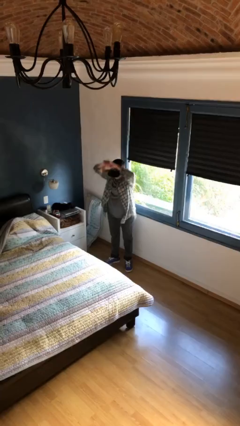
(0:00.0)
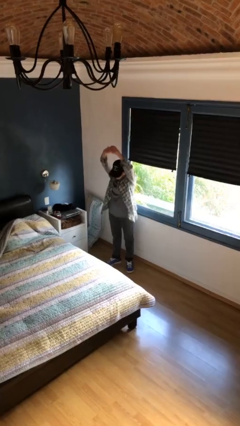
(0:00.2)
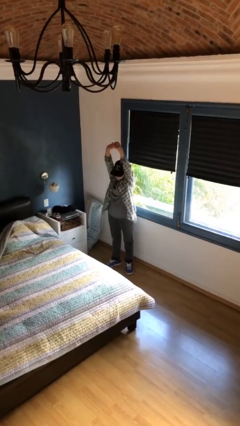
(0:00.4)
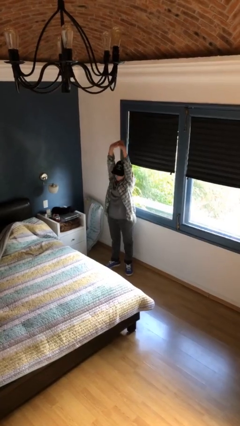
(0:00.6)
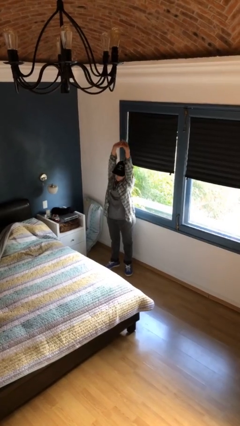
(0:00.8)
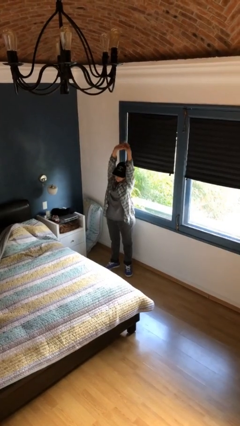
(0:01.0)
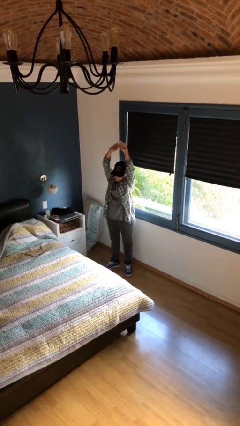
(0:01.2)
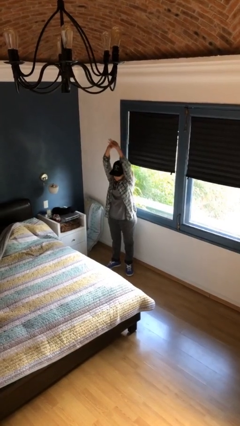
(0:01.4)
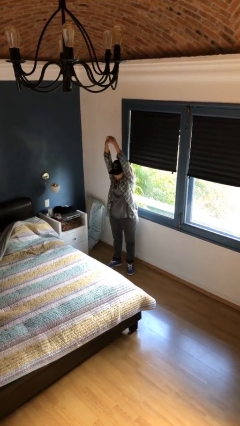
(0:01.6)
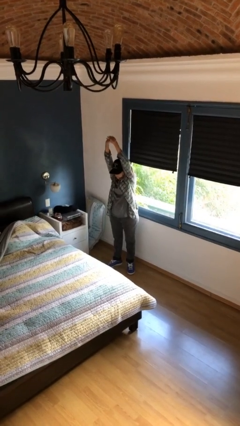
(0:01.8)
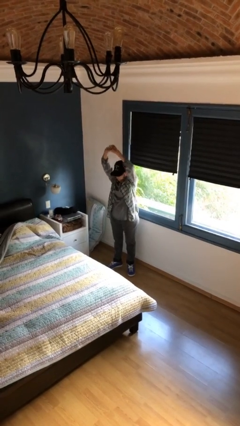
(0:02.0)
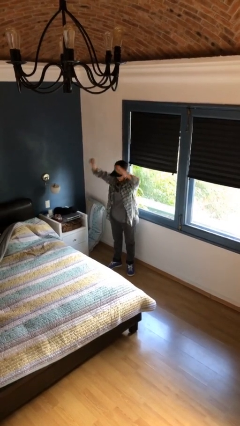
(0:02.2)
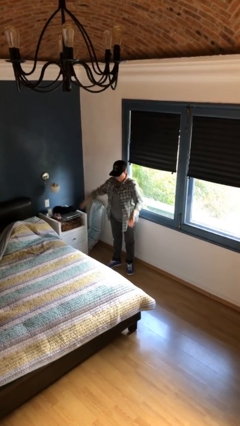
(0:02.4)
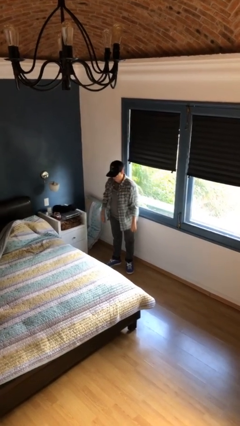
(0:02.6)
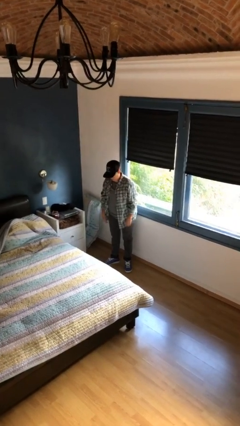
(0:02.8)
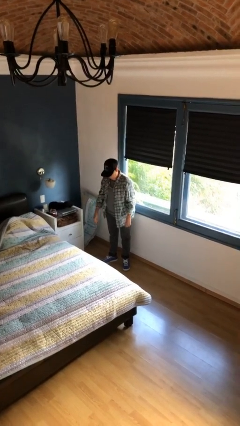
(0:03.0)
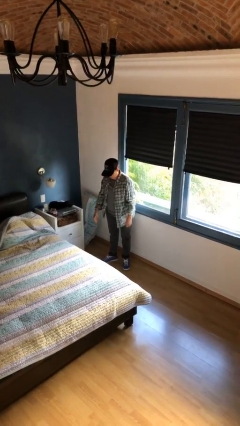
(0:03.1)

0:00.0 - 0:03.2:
person stretches arms over head

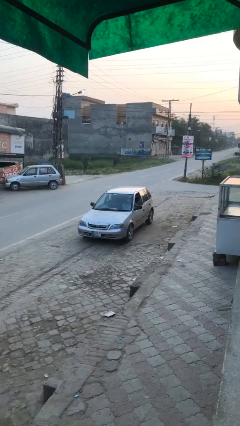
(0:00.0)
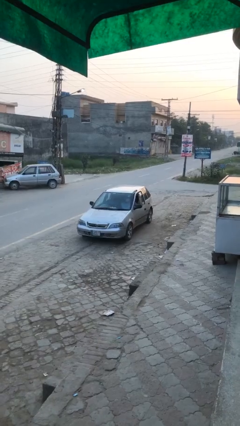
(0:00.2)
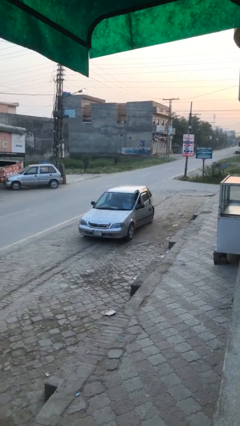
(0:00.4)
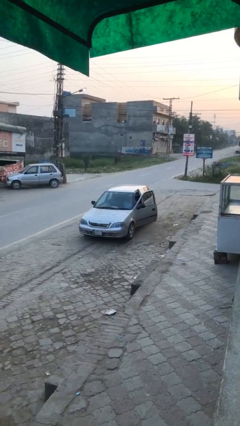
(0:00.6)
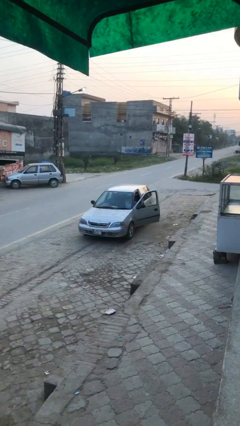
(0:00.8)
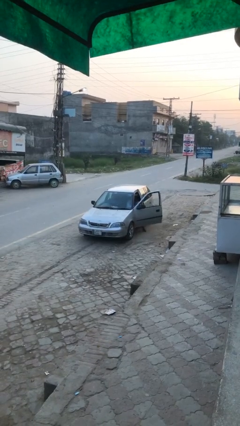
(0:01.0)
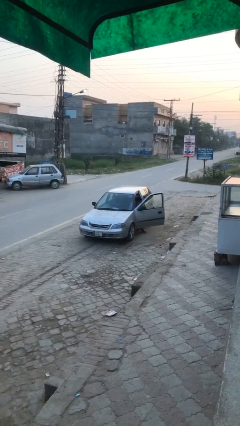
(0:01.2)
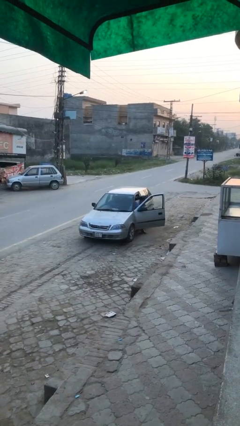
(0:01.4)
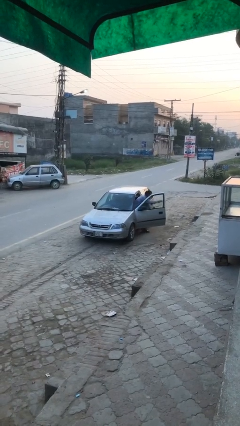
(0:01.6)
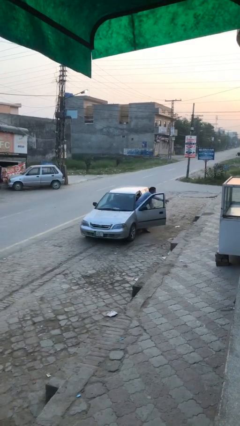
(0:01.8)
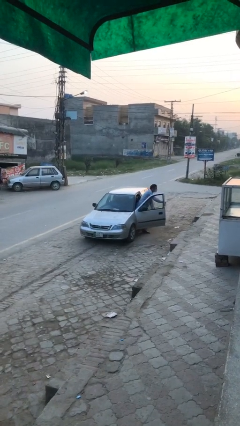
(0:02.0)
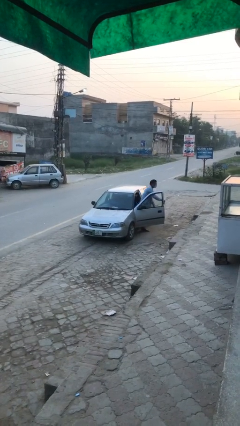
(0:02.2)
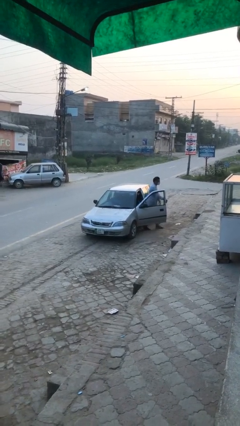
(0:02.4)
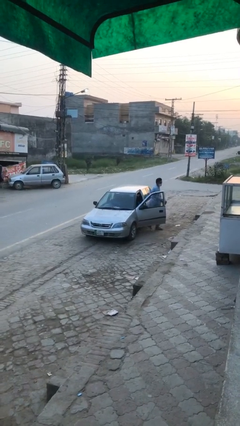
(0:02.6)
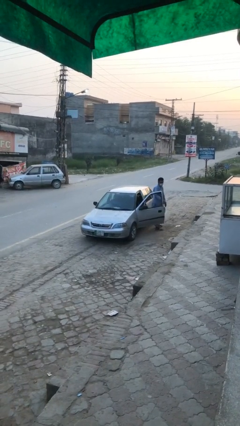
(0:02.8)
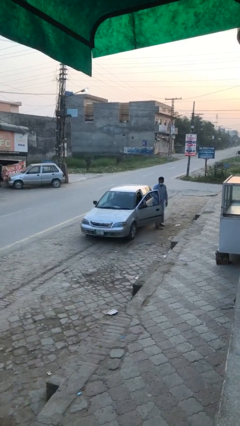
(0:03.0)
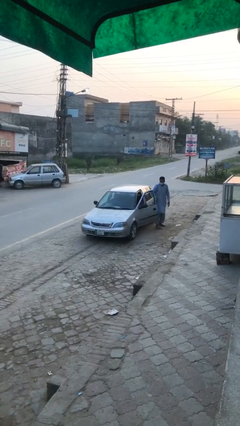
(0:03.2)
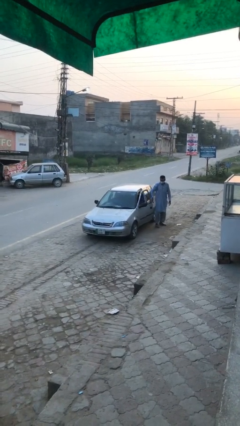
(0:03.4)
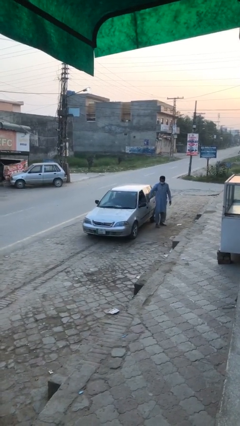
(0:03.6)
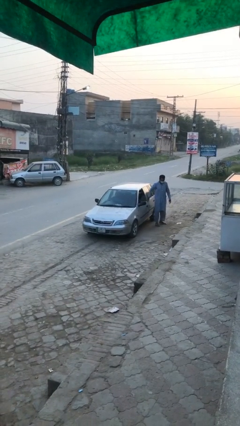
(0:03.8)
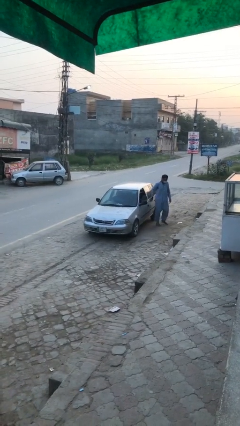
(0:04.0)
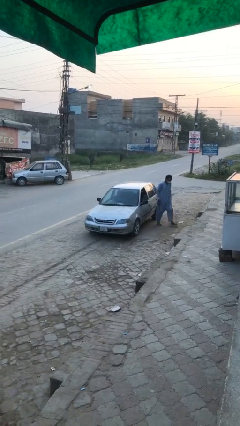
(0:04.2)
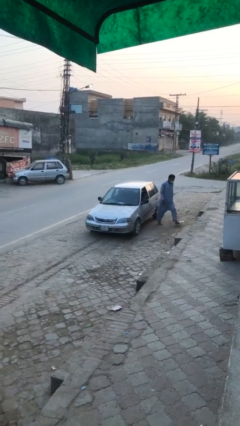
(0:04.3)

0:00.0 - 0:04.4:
car drops off person

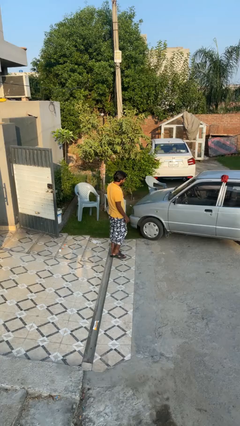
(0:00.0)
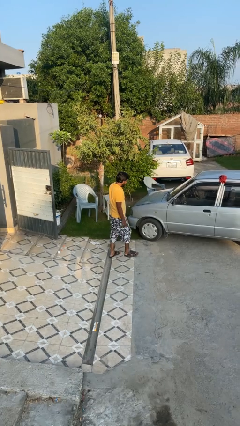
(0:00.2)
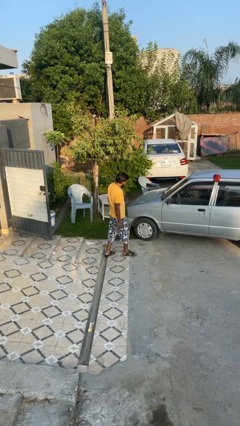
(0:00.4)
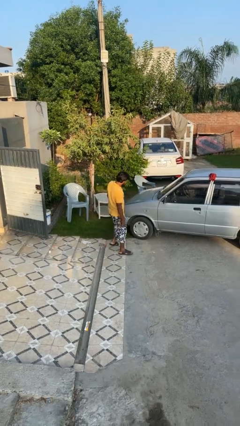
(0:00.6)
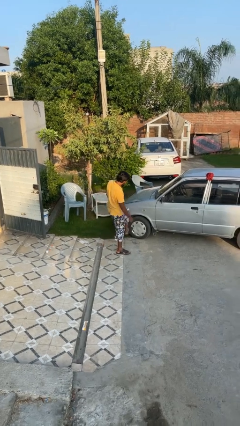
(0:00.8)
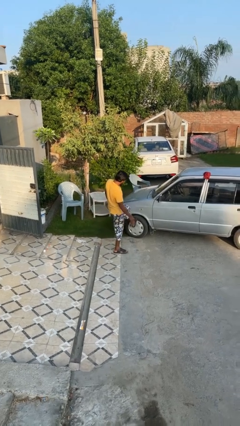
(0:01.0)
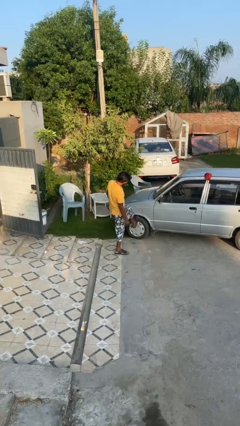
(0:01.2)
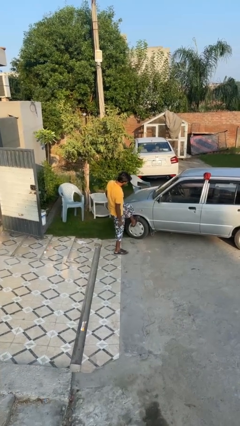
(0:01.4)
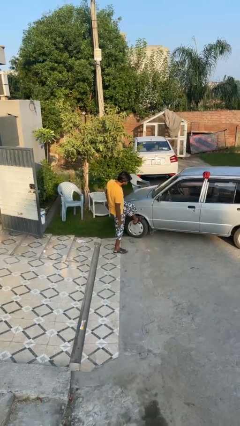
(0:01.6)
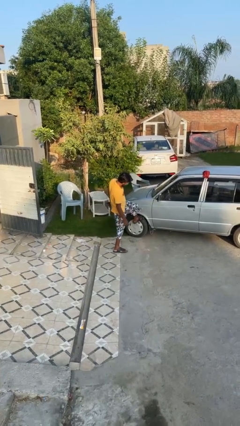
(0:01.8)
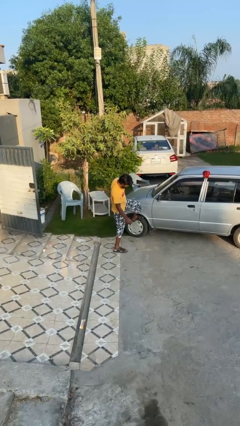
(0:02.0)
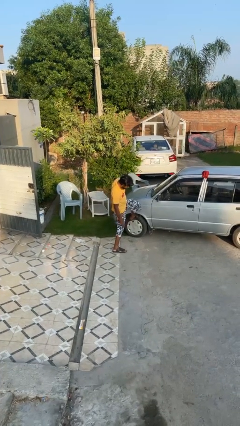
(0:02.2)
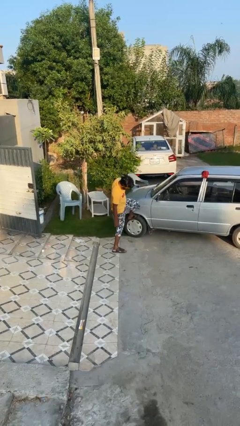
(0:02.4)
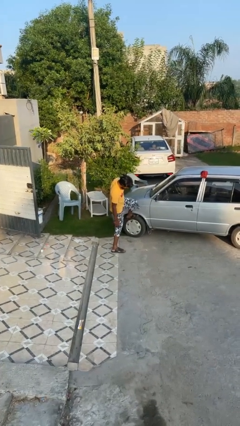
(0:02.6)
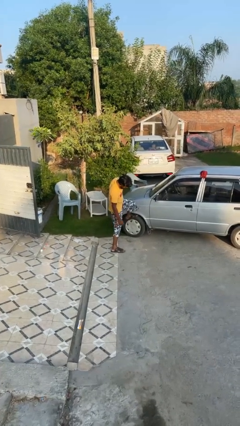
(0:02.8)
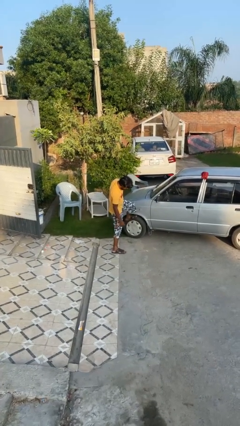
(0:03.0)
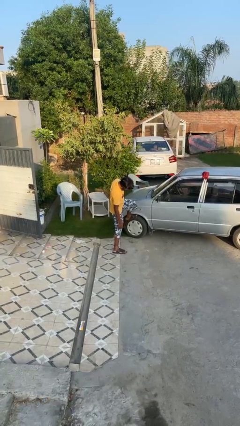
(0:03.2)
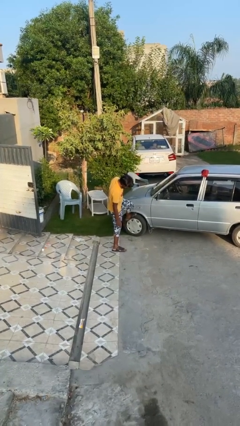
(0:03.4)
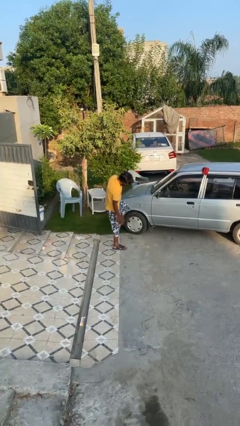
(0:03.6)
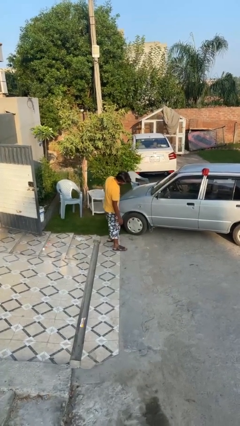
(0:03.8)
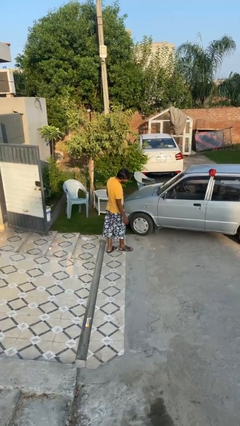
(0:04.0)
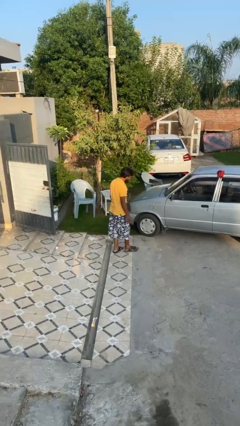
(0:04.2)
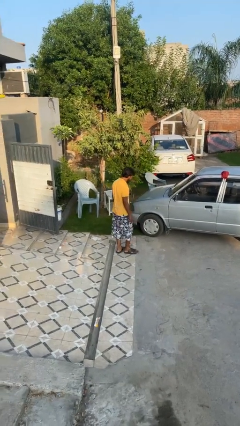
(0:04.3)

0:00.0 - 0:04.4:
person kicks car tires

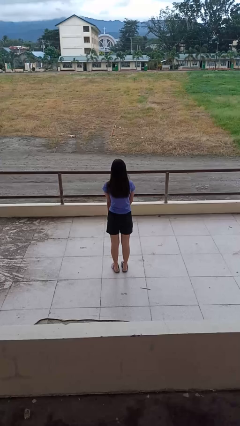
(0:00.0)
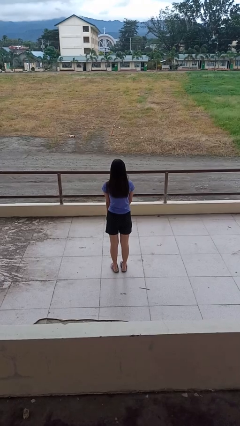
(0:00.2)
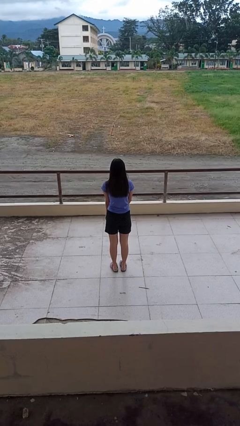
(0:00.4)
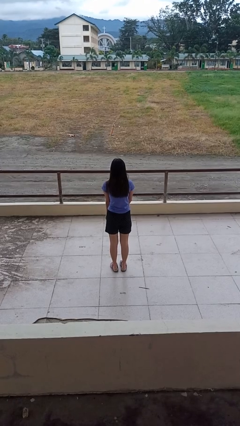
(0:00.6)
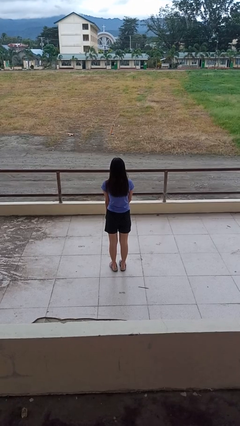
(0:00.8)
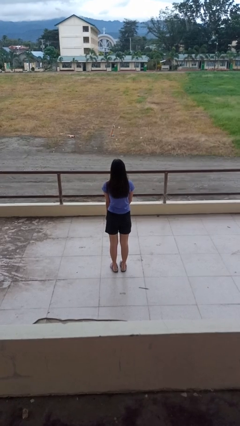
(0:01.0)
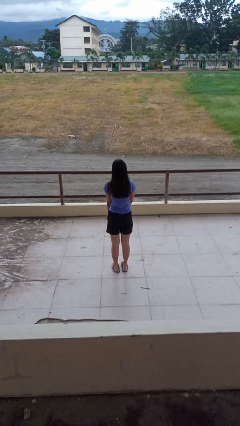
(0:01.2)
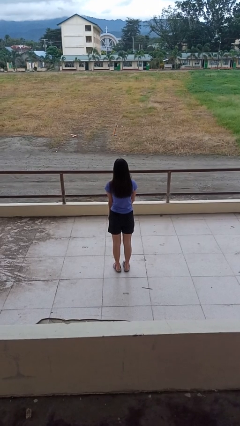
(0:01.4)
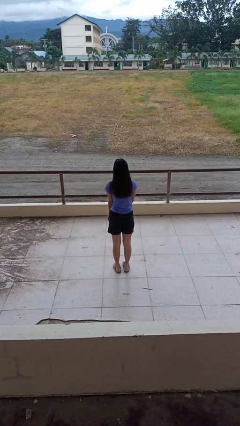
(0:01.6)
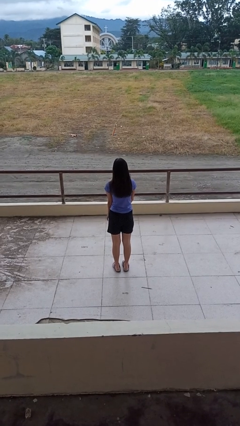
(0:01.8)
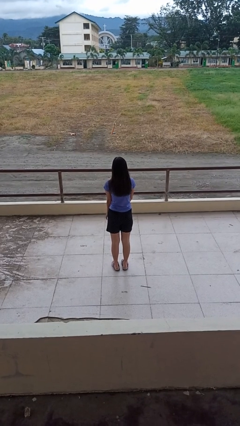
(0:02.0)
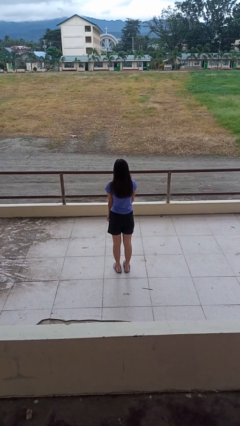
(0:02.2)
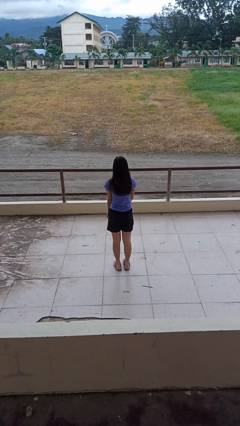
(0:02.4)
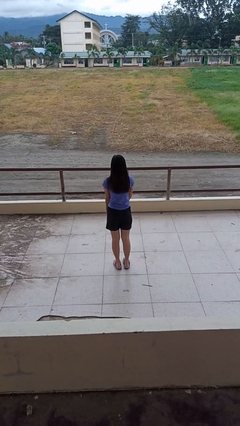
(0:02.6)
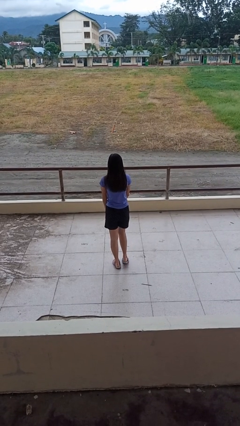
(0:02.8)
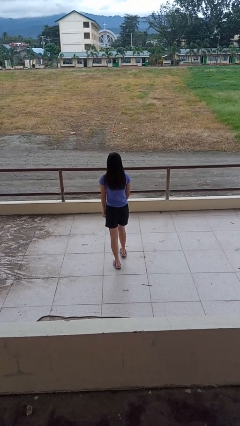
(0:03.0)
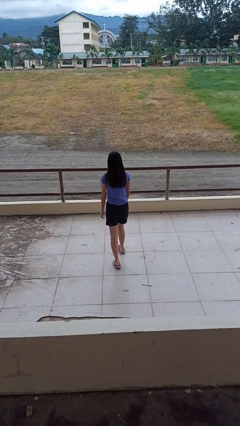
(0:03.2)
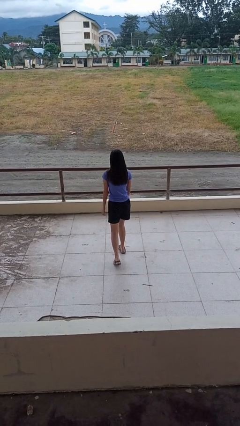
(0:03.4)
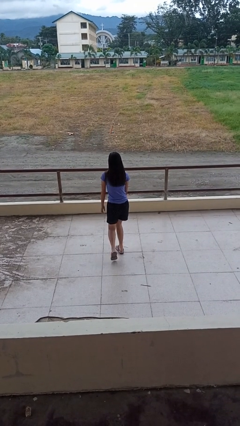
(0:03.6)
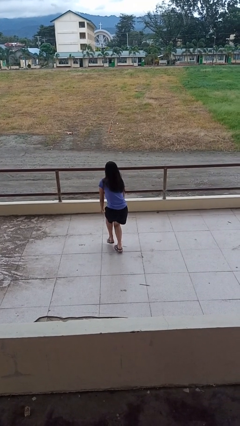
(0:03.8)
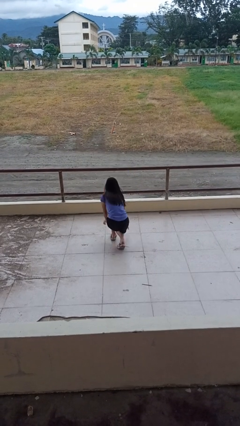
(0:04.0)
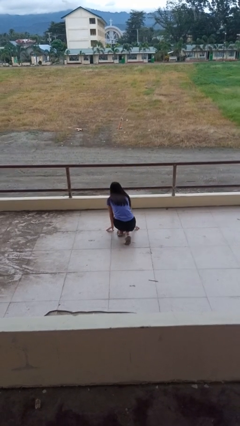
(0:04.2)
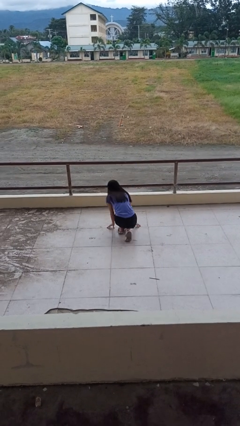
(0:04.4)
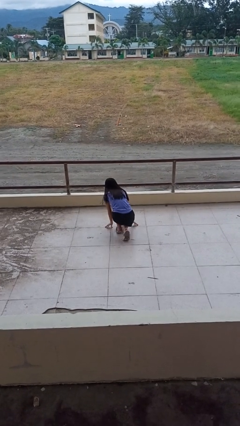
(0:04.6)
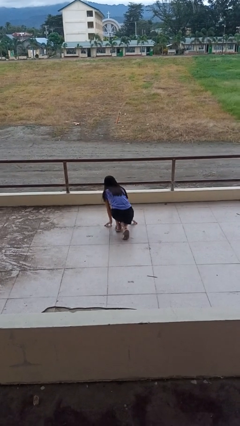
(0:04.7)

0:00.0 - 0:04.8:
person trips on object on floor

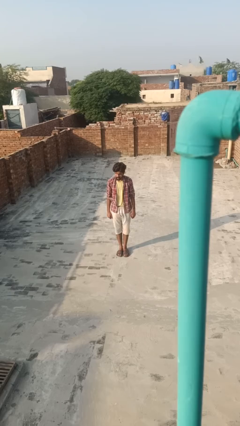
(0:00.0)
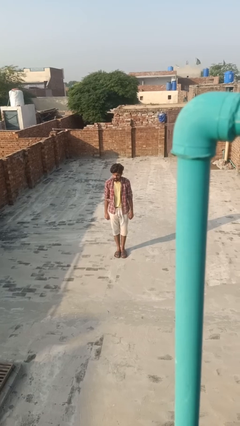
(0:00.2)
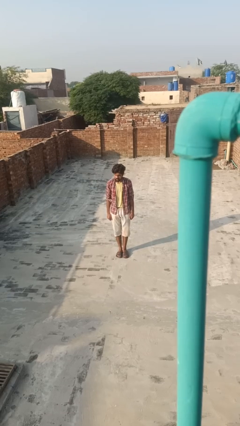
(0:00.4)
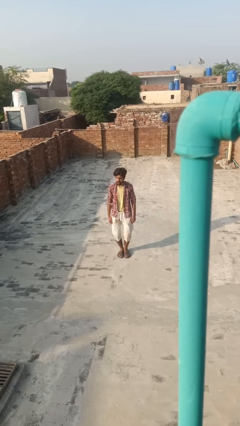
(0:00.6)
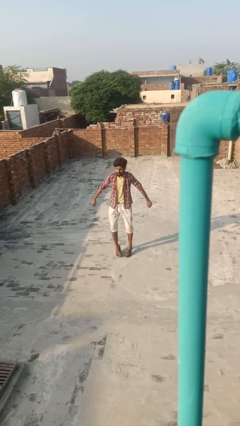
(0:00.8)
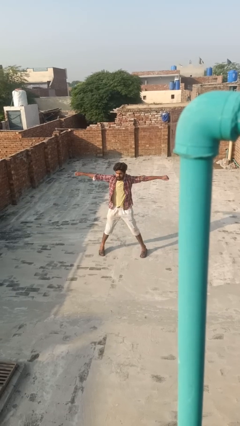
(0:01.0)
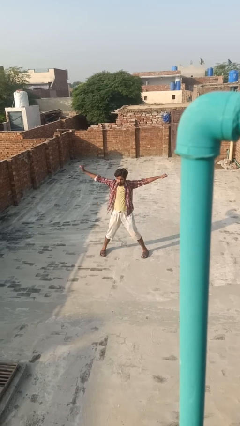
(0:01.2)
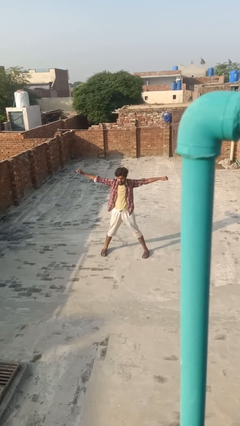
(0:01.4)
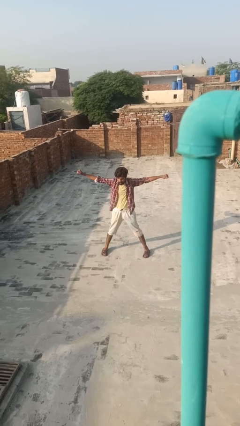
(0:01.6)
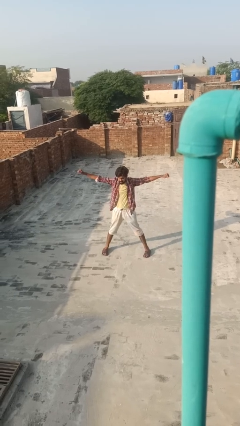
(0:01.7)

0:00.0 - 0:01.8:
person exercises with jumping jacks
